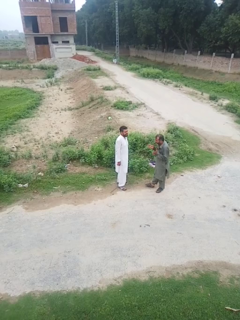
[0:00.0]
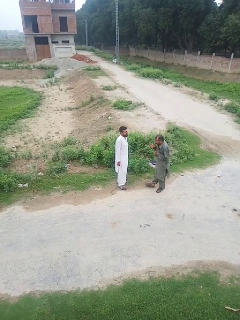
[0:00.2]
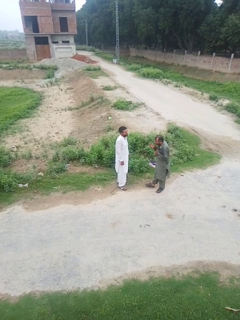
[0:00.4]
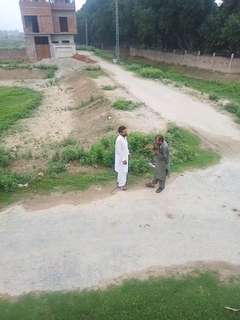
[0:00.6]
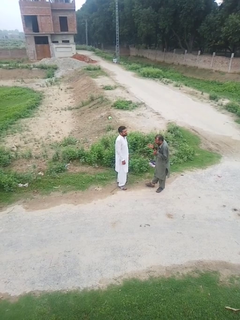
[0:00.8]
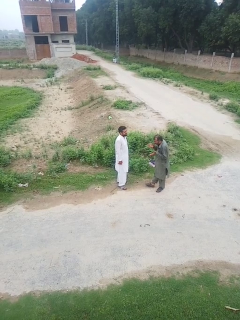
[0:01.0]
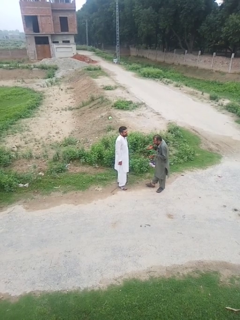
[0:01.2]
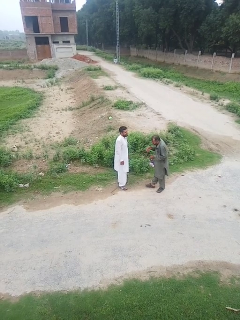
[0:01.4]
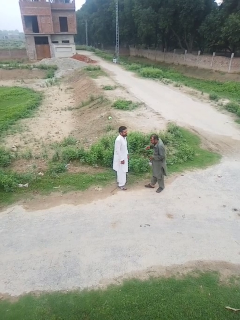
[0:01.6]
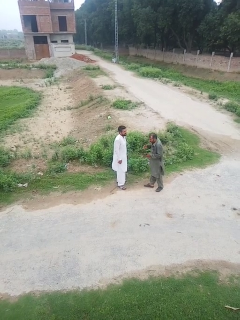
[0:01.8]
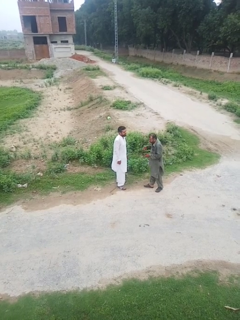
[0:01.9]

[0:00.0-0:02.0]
person laughs with person

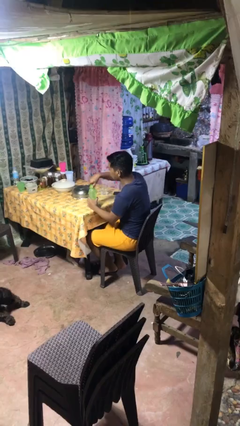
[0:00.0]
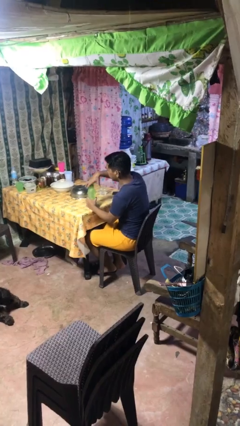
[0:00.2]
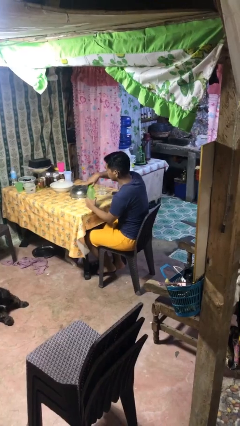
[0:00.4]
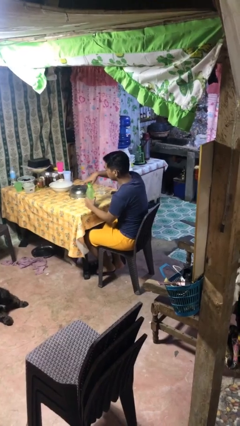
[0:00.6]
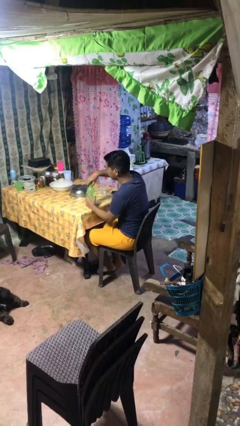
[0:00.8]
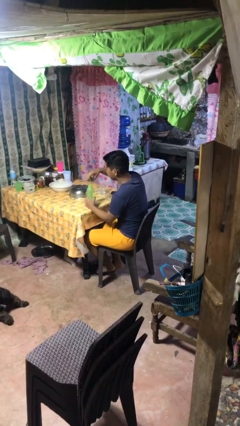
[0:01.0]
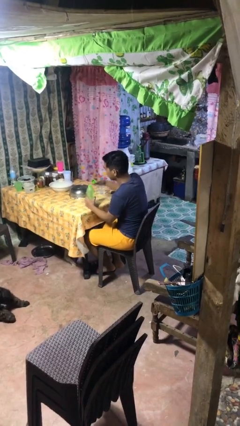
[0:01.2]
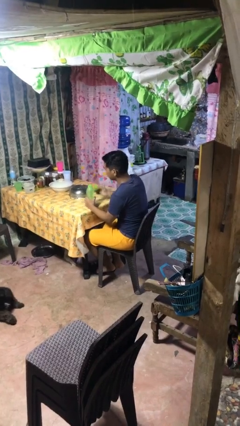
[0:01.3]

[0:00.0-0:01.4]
person unscrews lid from bottle

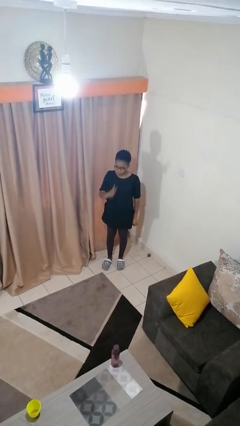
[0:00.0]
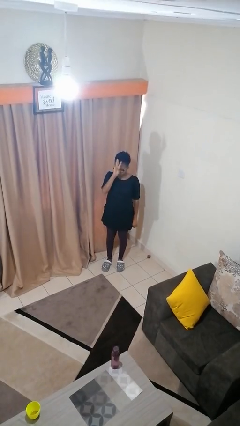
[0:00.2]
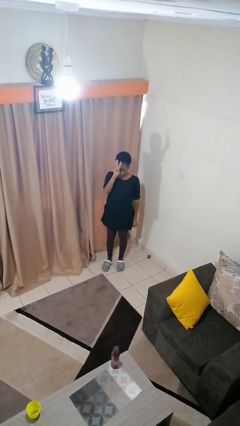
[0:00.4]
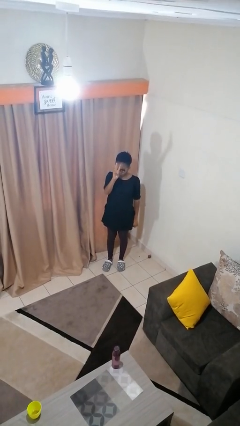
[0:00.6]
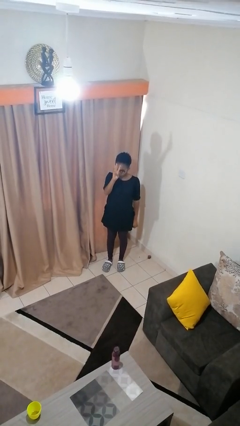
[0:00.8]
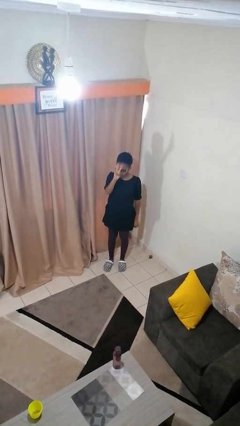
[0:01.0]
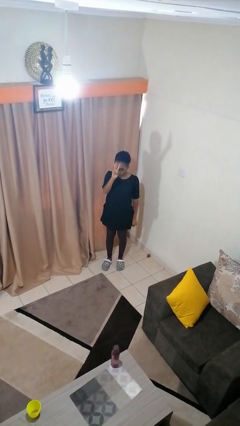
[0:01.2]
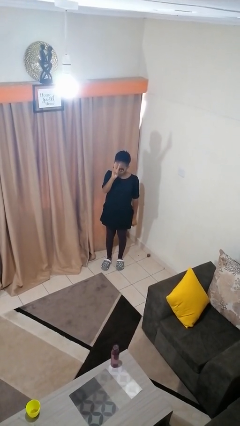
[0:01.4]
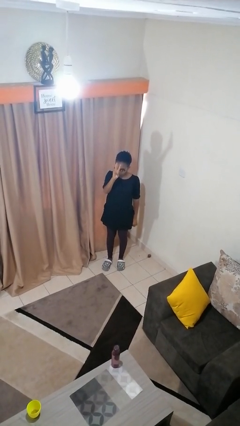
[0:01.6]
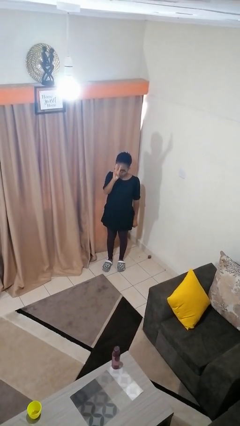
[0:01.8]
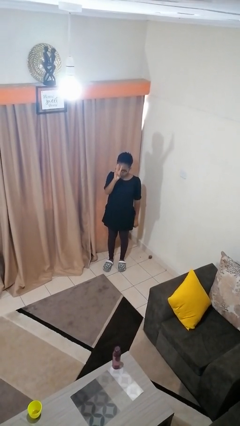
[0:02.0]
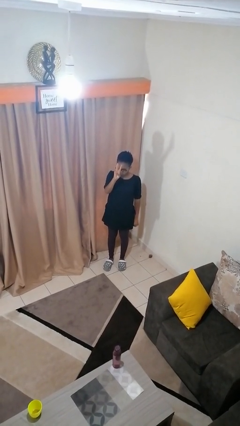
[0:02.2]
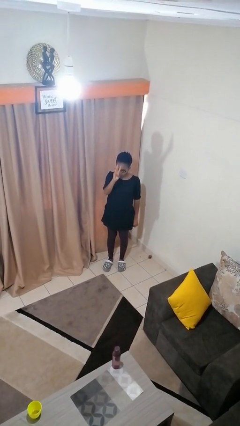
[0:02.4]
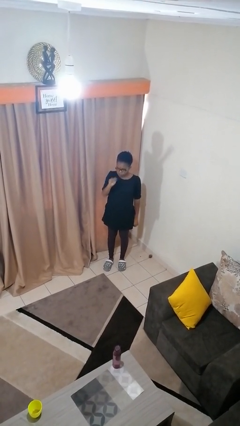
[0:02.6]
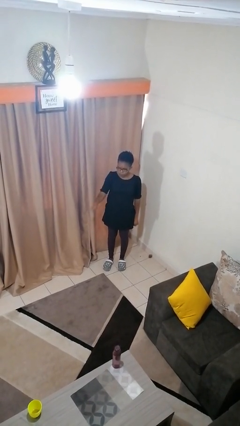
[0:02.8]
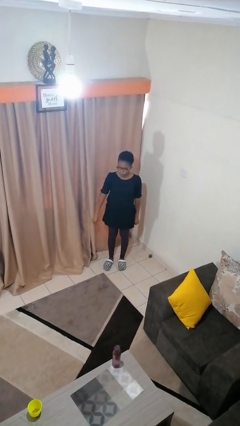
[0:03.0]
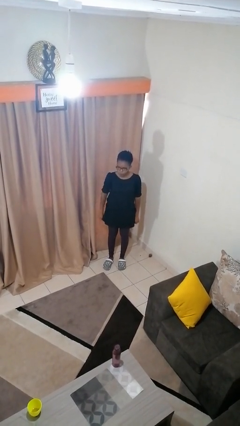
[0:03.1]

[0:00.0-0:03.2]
person gestures number three

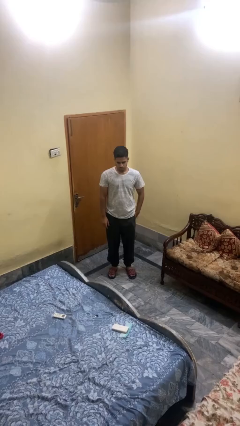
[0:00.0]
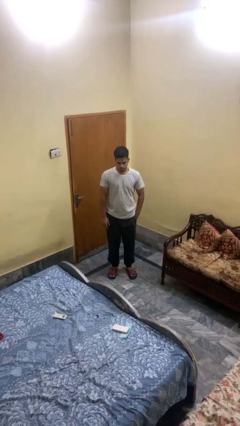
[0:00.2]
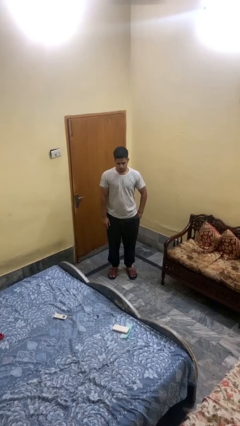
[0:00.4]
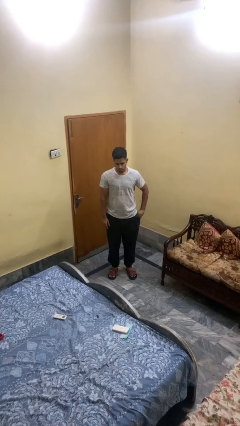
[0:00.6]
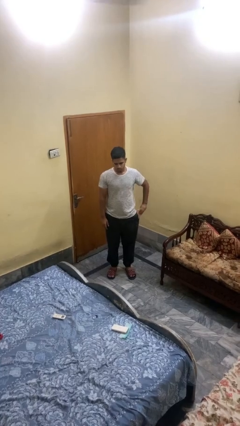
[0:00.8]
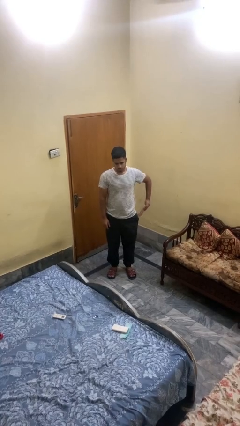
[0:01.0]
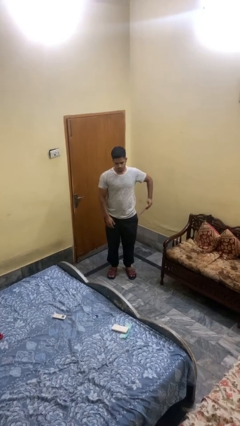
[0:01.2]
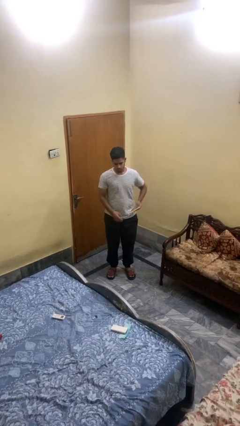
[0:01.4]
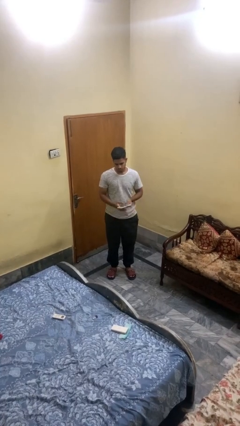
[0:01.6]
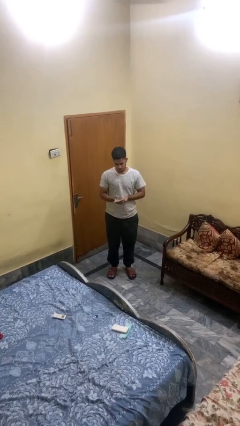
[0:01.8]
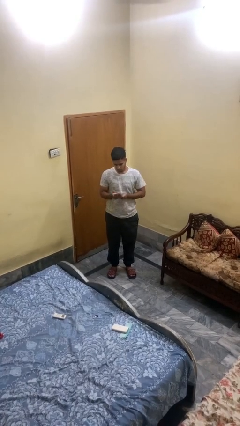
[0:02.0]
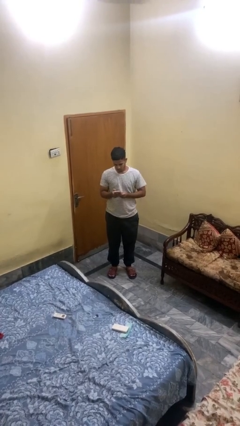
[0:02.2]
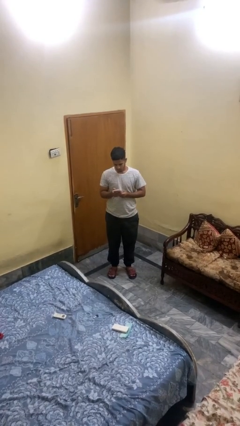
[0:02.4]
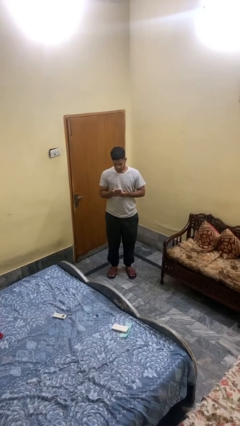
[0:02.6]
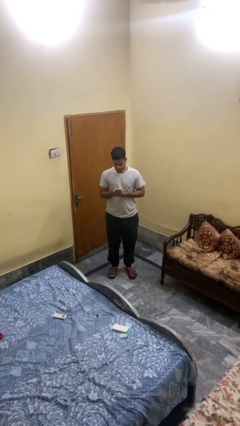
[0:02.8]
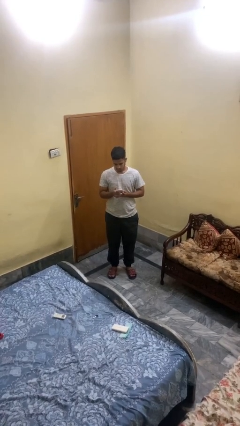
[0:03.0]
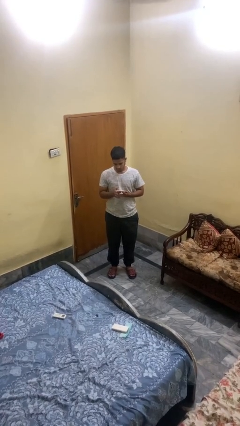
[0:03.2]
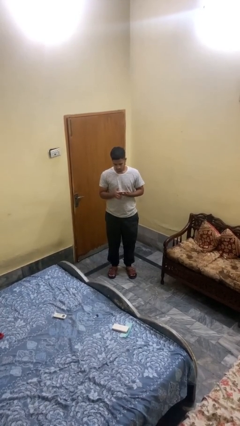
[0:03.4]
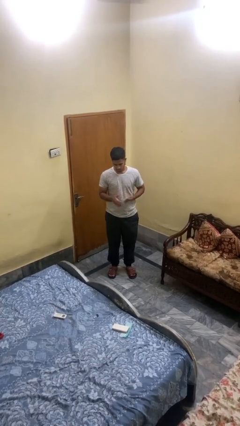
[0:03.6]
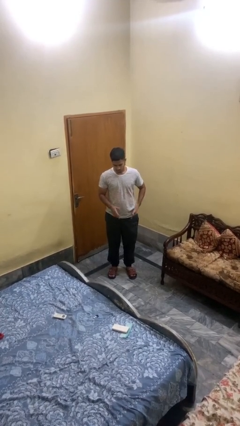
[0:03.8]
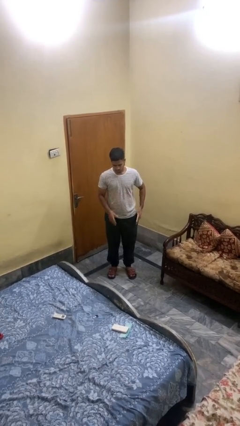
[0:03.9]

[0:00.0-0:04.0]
person takes phone from pocket

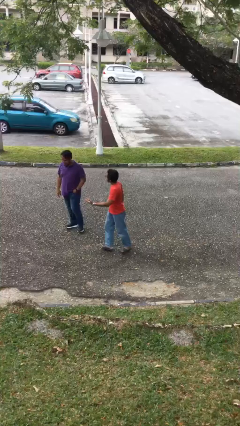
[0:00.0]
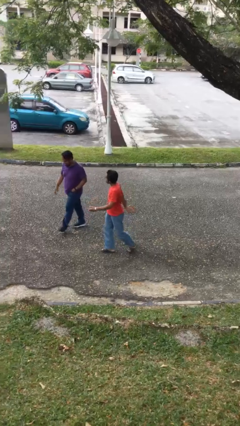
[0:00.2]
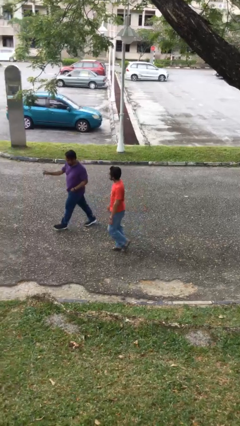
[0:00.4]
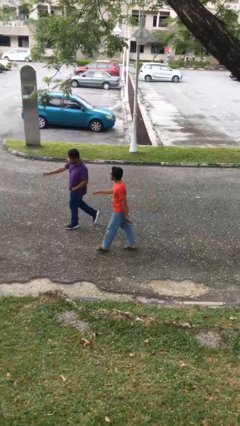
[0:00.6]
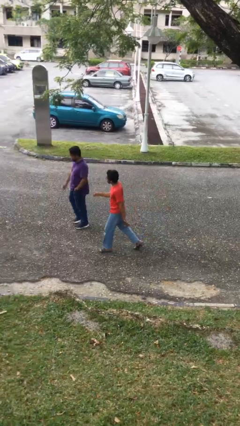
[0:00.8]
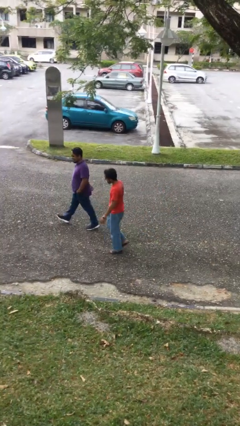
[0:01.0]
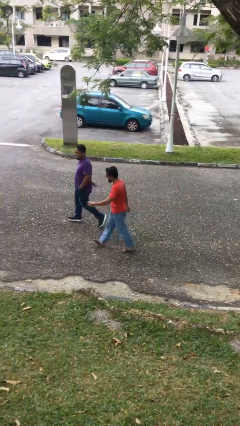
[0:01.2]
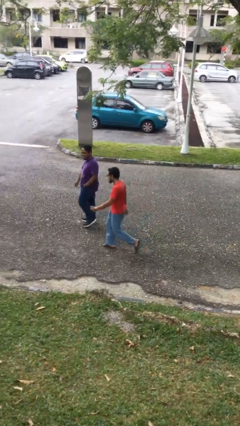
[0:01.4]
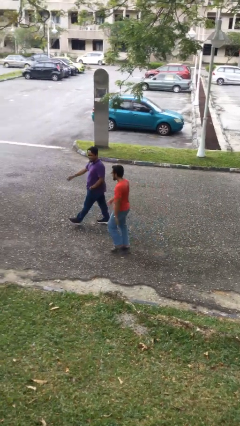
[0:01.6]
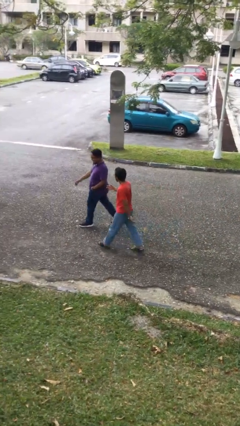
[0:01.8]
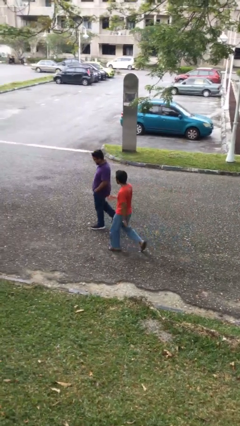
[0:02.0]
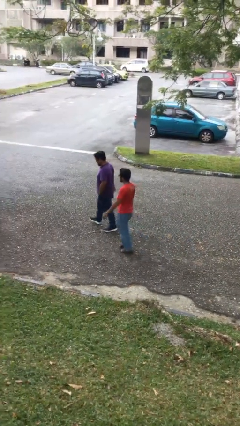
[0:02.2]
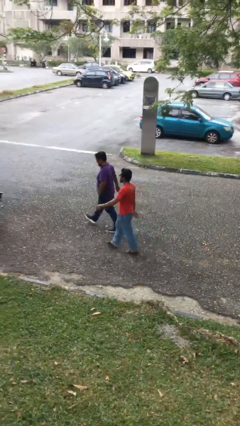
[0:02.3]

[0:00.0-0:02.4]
person talks to person

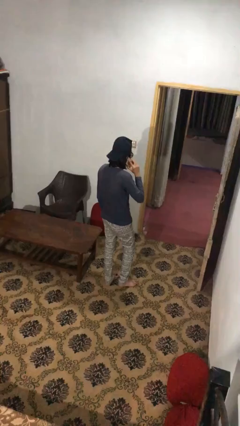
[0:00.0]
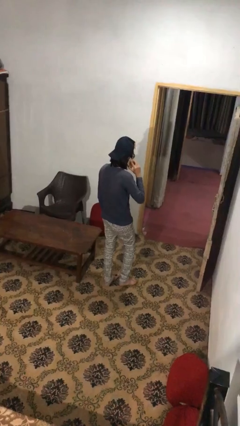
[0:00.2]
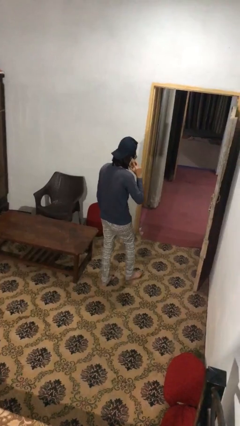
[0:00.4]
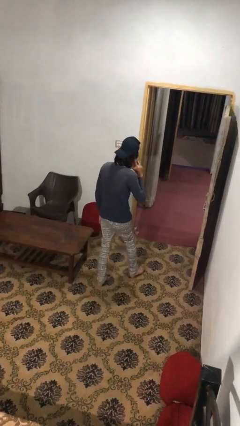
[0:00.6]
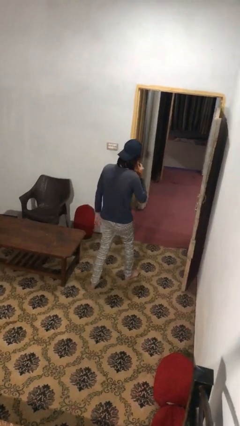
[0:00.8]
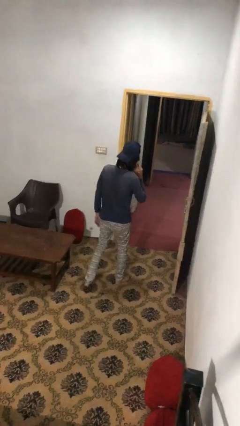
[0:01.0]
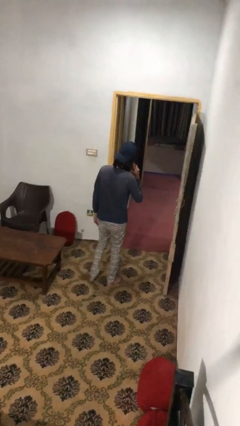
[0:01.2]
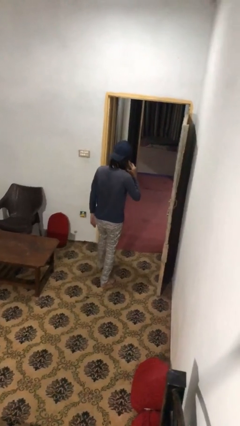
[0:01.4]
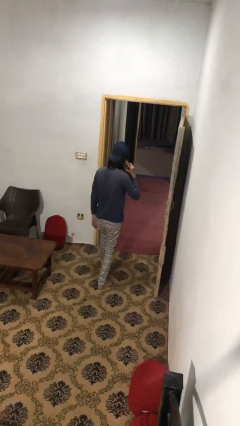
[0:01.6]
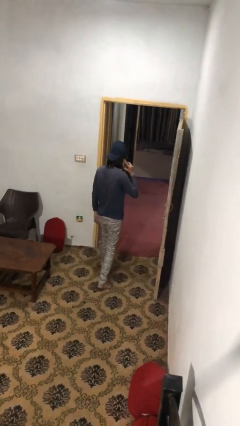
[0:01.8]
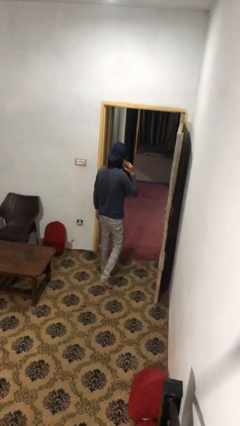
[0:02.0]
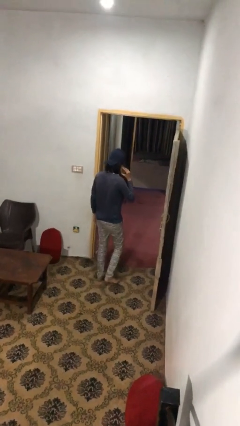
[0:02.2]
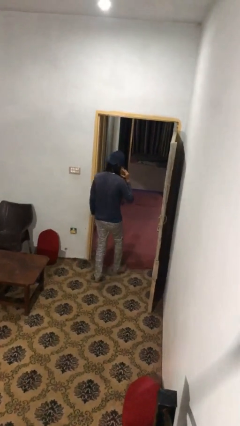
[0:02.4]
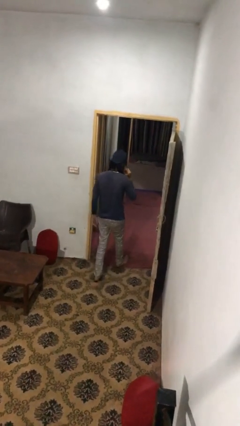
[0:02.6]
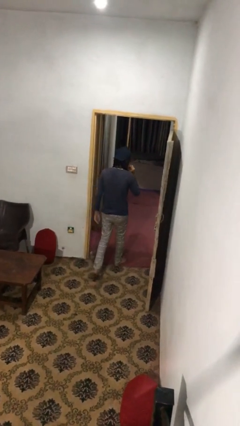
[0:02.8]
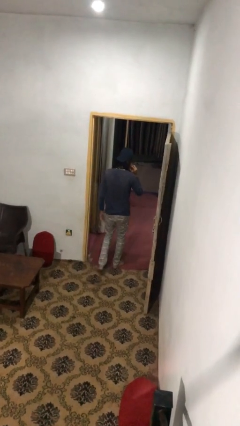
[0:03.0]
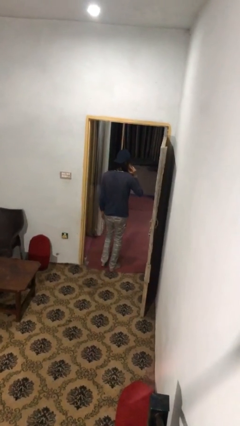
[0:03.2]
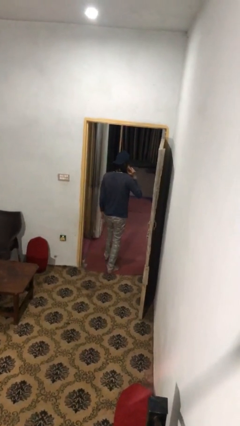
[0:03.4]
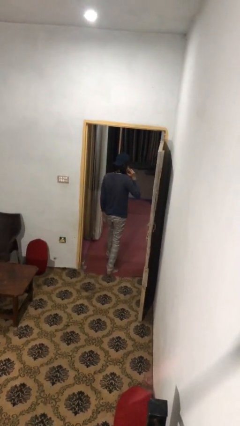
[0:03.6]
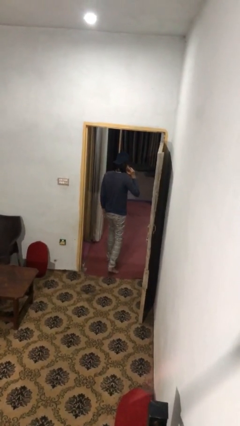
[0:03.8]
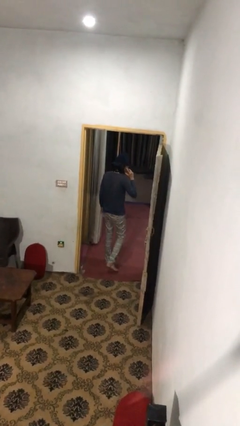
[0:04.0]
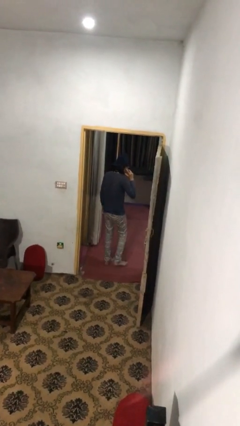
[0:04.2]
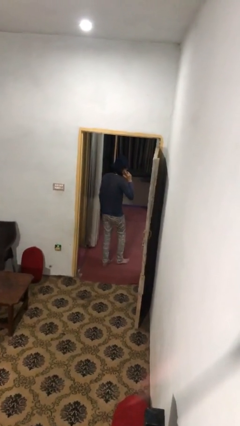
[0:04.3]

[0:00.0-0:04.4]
person exits scene through structure

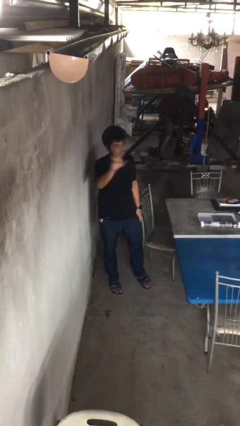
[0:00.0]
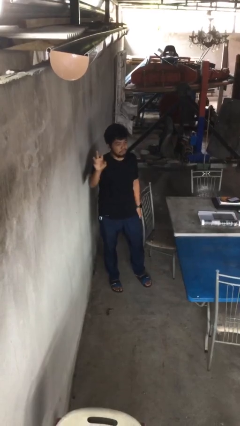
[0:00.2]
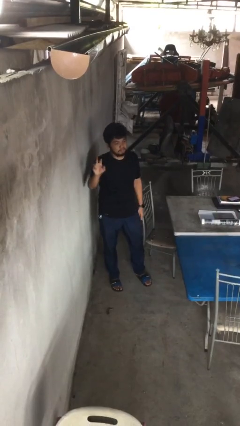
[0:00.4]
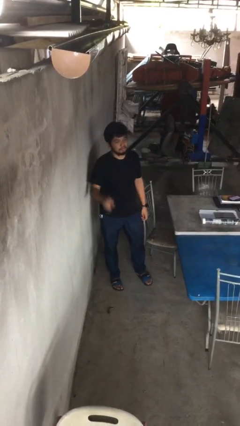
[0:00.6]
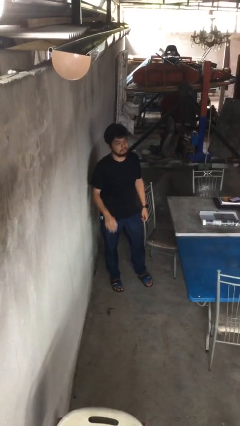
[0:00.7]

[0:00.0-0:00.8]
person gestures swipe right
